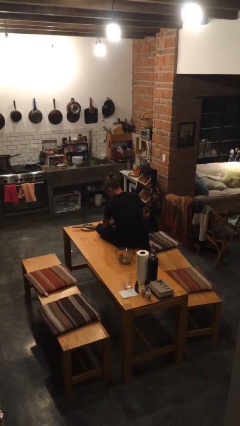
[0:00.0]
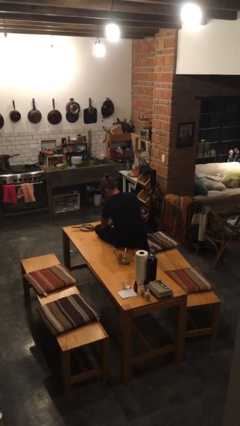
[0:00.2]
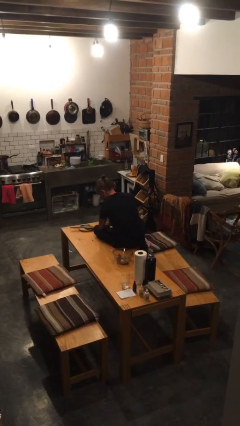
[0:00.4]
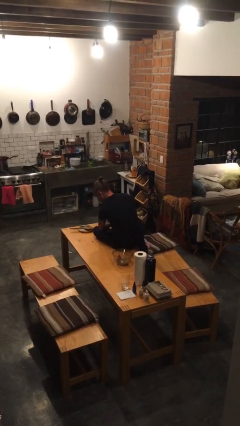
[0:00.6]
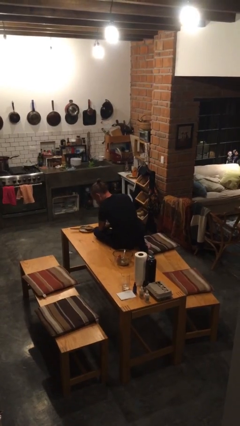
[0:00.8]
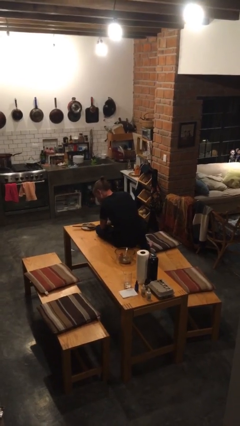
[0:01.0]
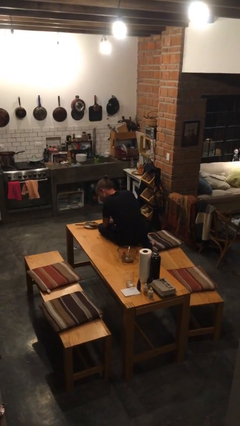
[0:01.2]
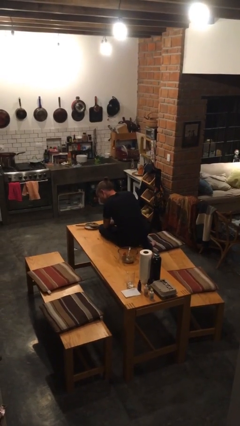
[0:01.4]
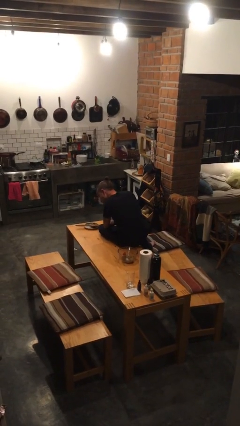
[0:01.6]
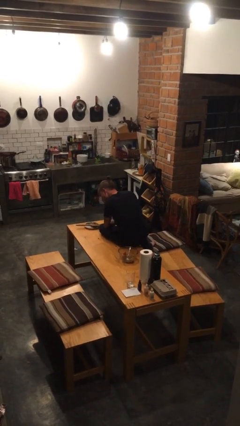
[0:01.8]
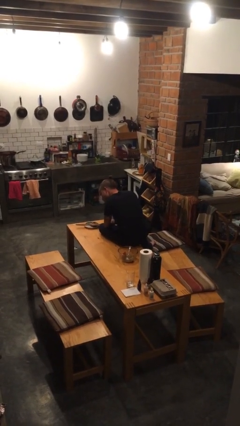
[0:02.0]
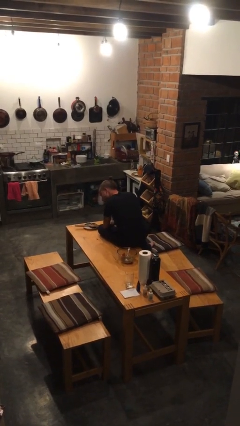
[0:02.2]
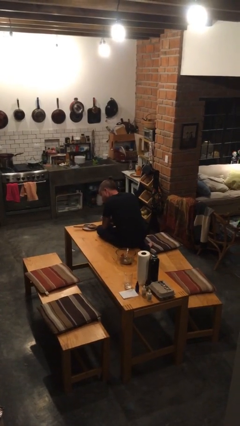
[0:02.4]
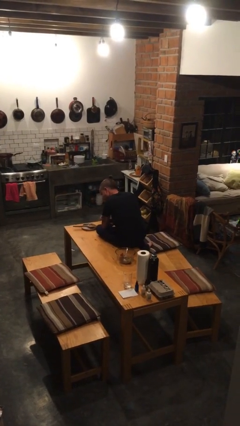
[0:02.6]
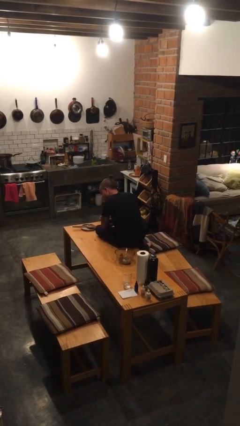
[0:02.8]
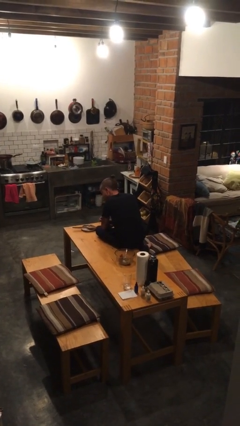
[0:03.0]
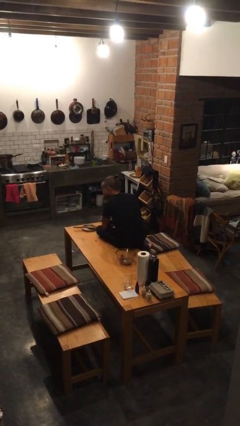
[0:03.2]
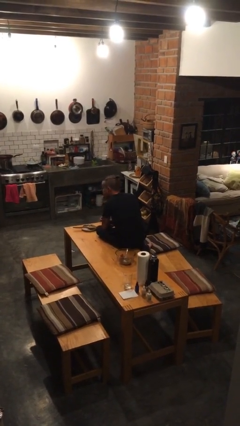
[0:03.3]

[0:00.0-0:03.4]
person strokes chin

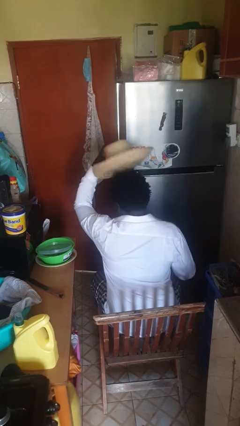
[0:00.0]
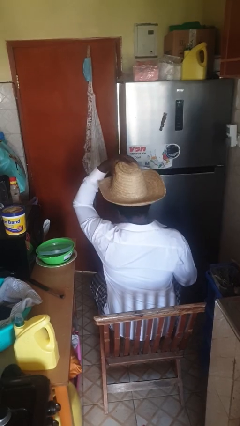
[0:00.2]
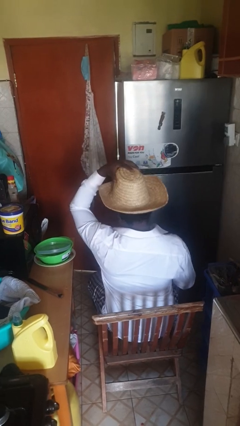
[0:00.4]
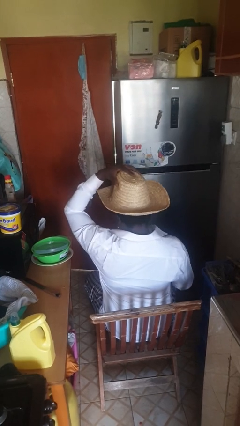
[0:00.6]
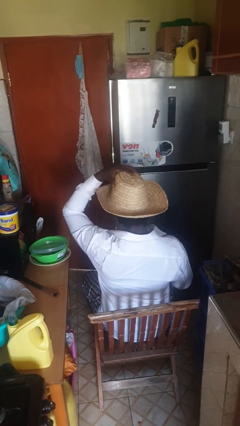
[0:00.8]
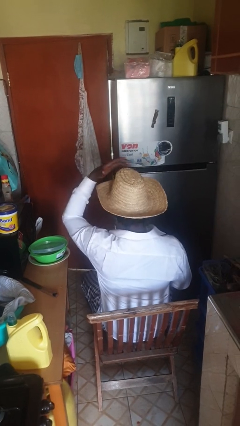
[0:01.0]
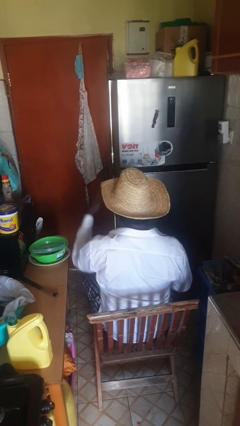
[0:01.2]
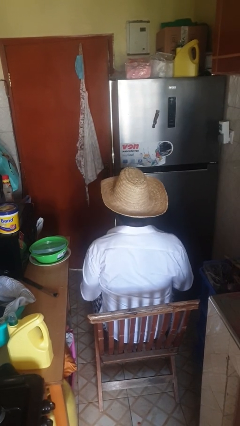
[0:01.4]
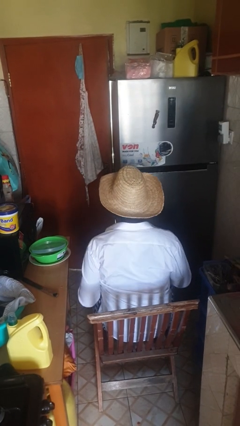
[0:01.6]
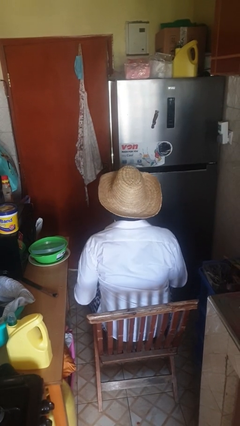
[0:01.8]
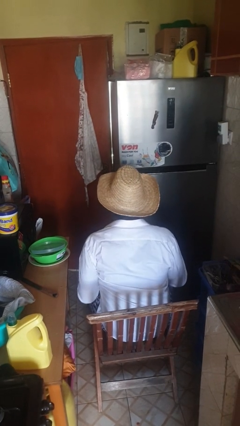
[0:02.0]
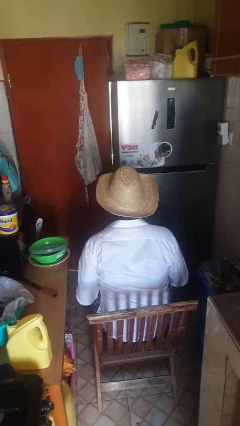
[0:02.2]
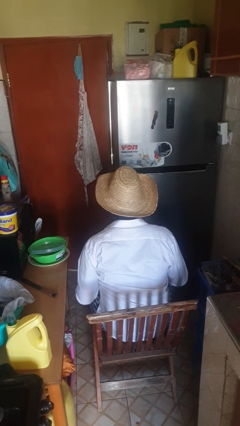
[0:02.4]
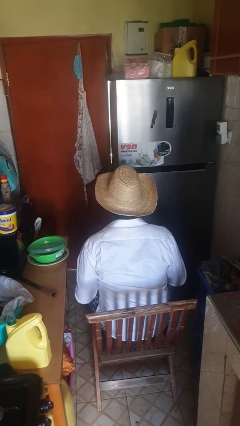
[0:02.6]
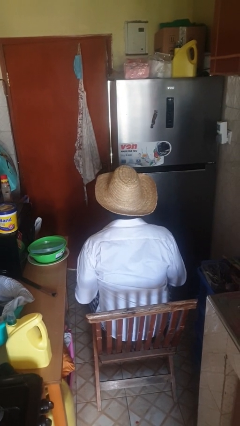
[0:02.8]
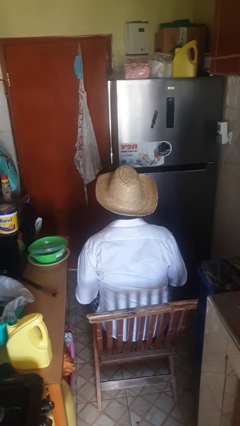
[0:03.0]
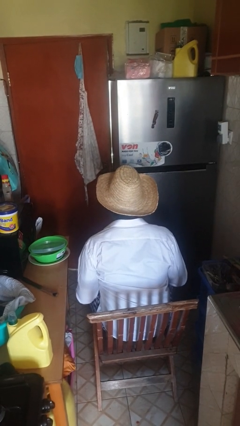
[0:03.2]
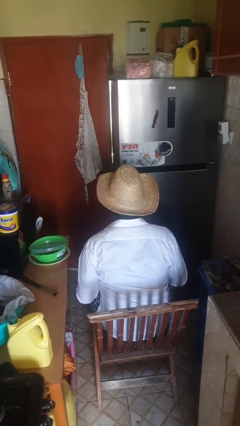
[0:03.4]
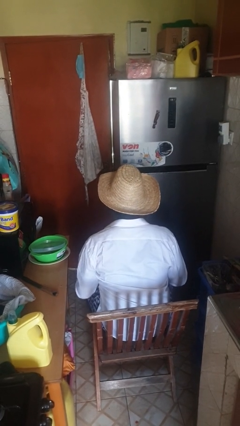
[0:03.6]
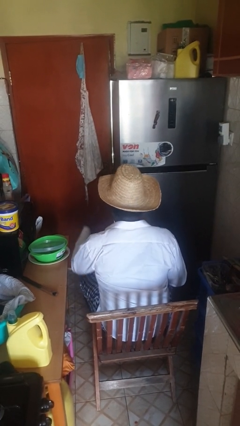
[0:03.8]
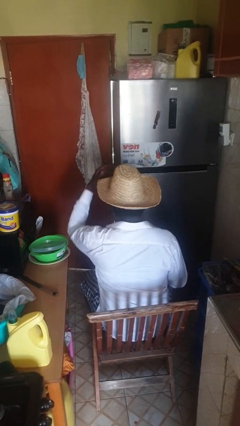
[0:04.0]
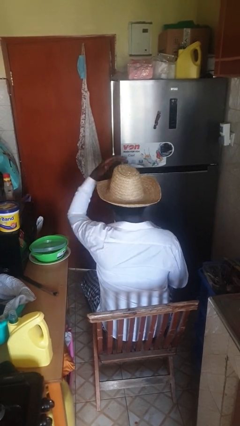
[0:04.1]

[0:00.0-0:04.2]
person puts on hat

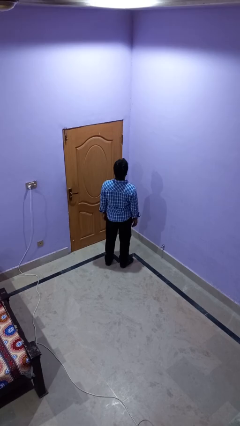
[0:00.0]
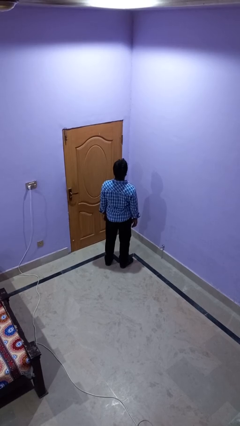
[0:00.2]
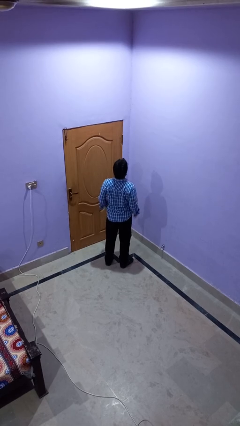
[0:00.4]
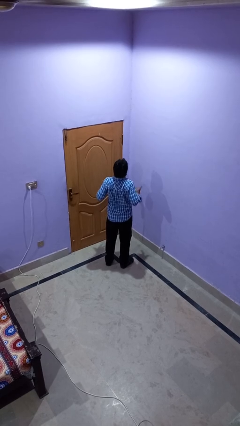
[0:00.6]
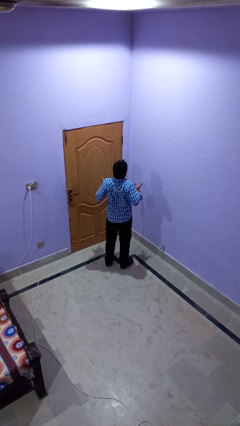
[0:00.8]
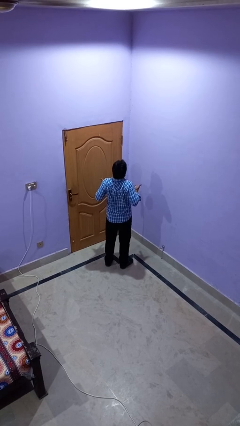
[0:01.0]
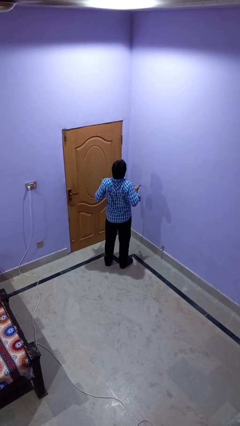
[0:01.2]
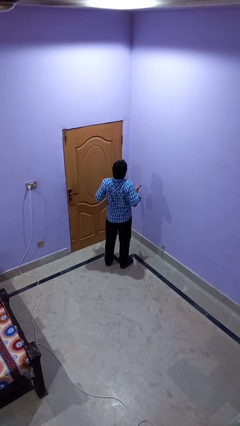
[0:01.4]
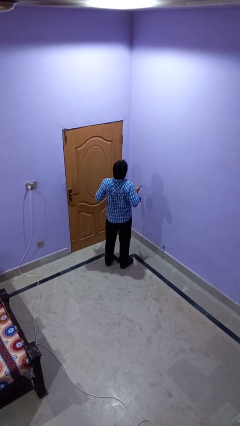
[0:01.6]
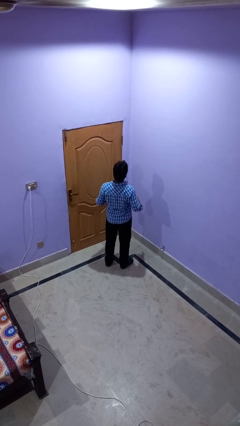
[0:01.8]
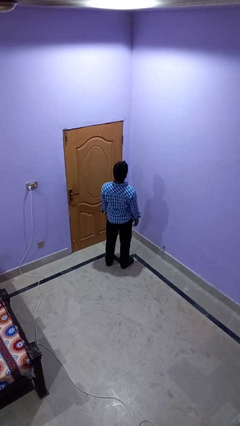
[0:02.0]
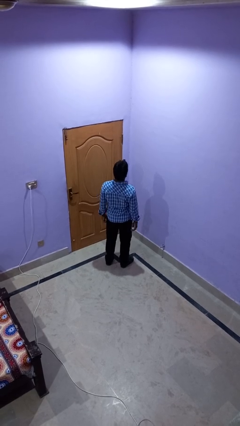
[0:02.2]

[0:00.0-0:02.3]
person shrugs

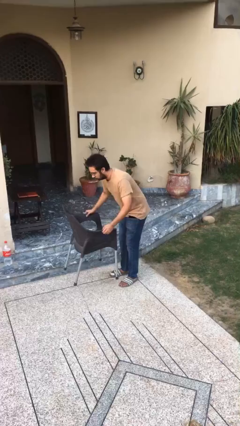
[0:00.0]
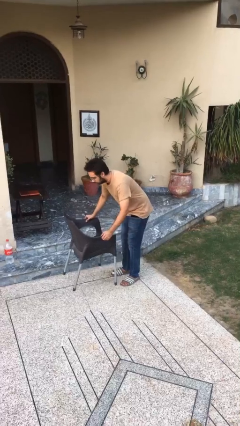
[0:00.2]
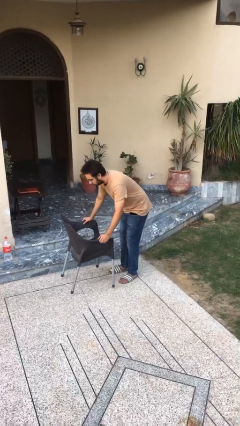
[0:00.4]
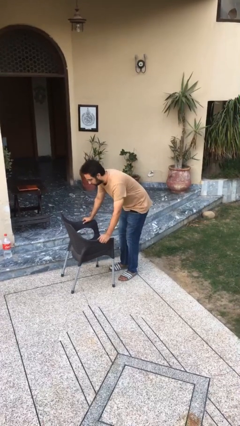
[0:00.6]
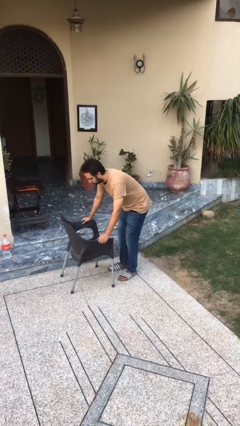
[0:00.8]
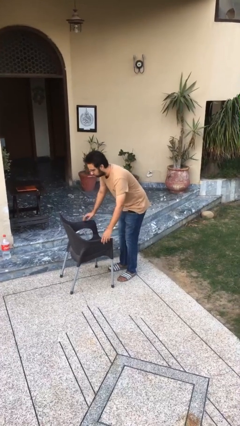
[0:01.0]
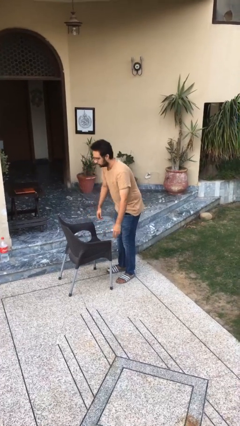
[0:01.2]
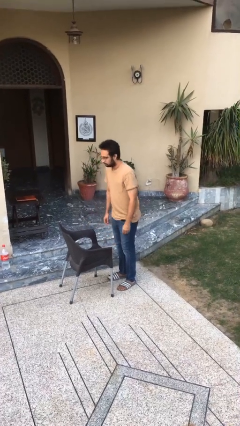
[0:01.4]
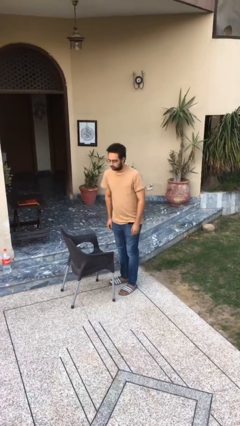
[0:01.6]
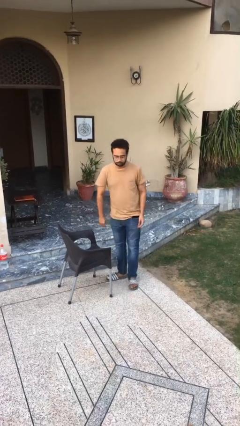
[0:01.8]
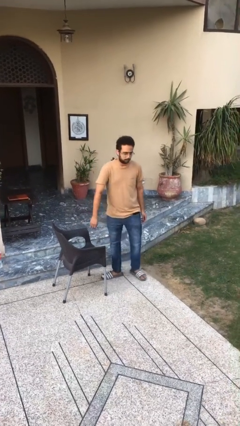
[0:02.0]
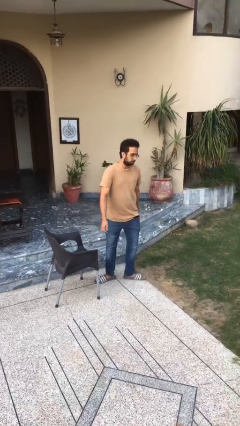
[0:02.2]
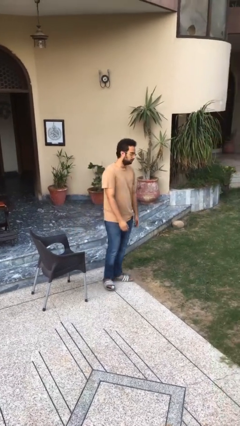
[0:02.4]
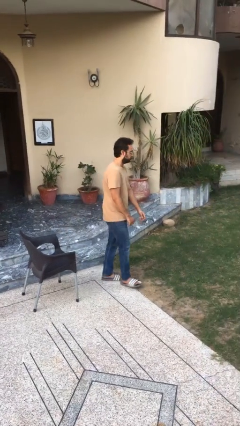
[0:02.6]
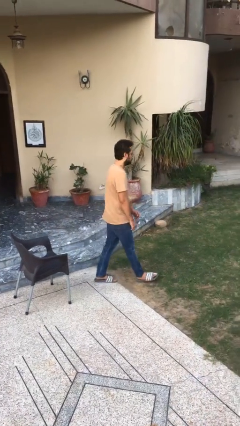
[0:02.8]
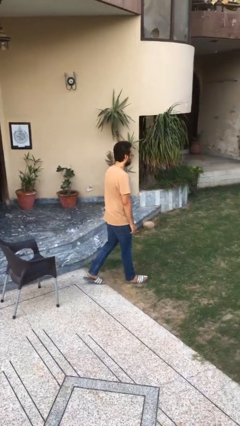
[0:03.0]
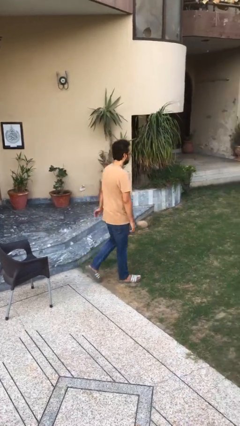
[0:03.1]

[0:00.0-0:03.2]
person puts down object on floor

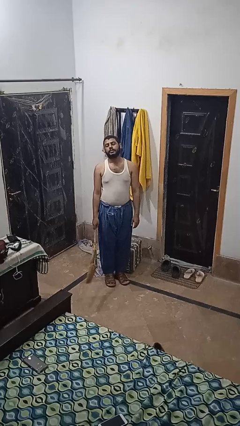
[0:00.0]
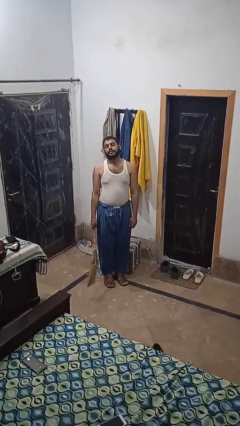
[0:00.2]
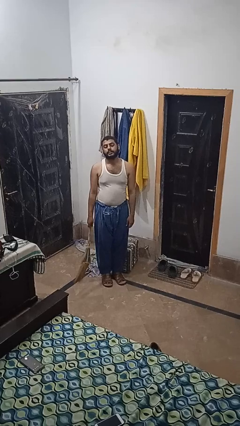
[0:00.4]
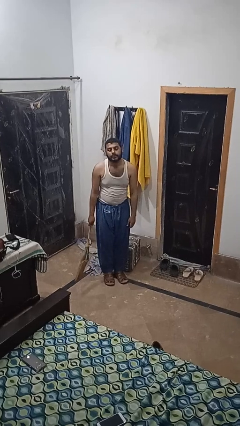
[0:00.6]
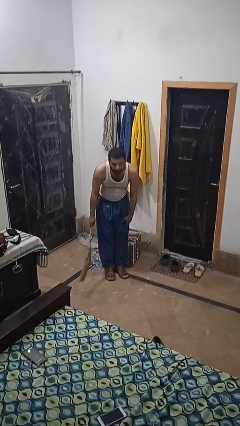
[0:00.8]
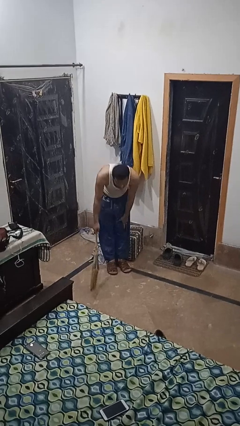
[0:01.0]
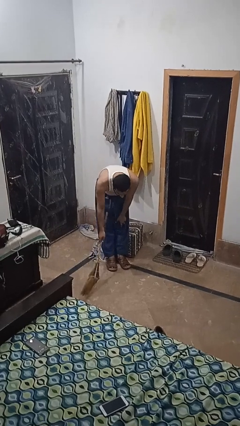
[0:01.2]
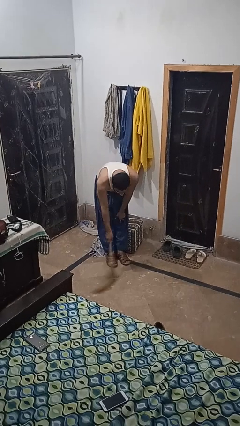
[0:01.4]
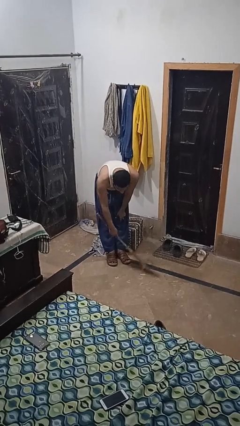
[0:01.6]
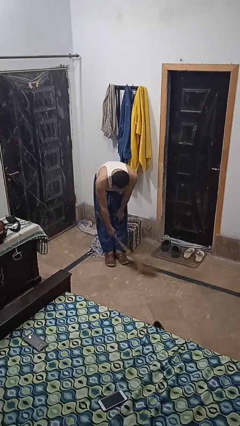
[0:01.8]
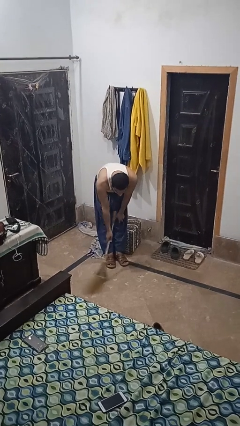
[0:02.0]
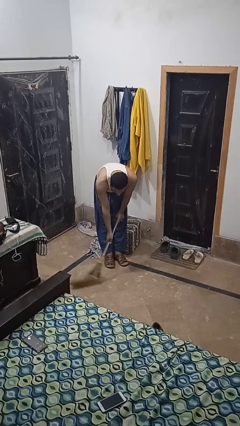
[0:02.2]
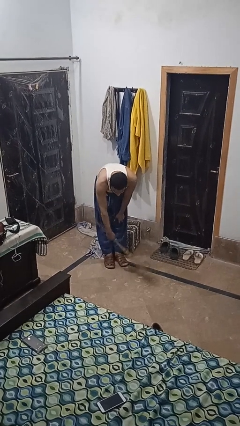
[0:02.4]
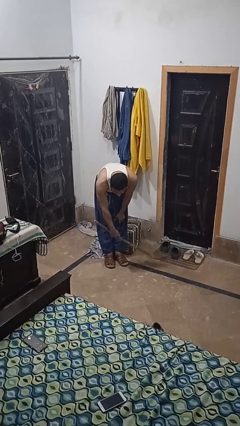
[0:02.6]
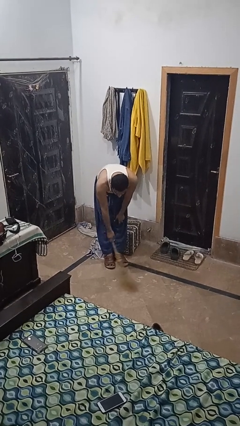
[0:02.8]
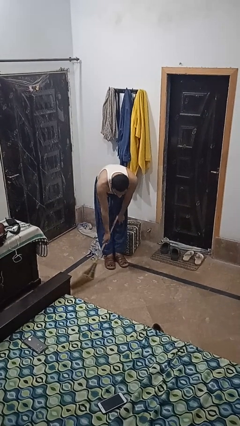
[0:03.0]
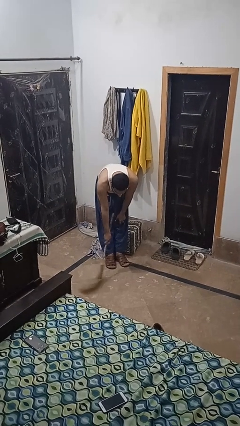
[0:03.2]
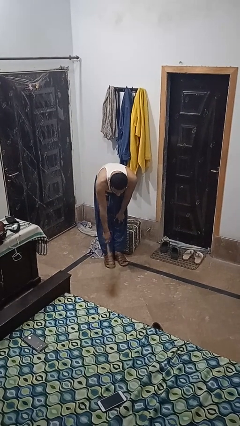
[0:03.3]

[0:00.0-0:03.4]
person sweeps floor

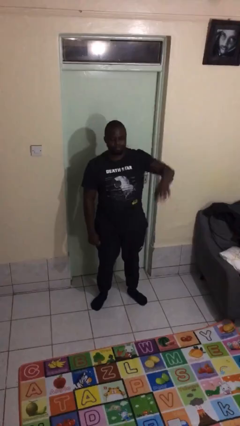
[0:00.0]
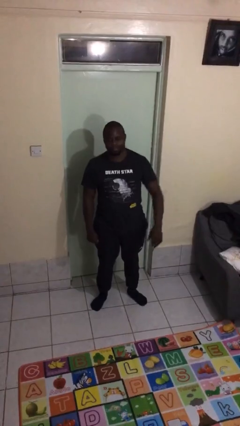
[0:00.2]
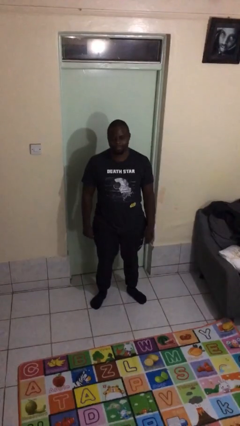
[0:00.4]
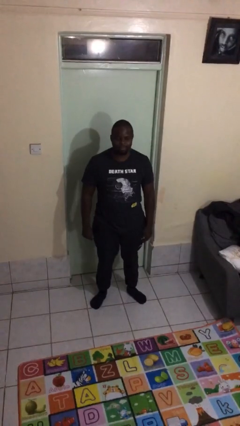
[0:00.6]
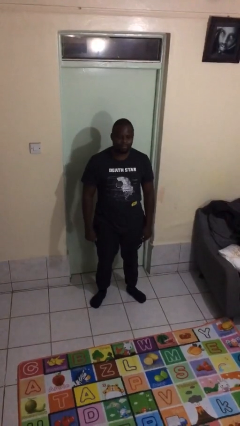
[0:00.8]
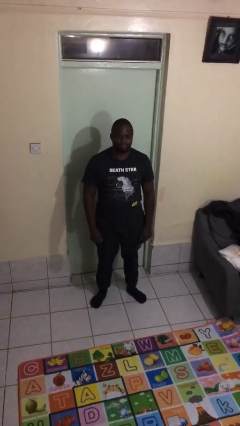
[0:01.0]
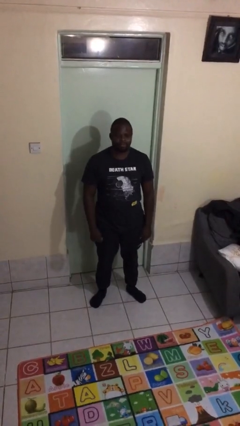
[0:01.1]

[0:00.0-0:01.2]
person gestures lower hand
